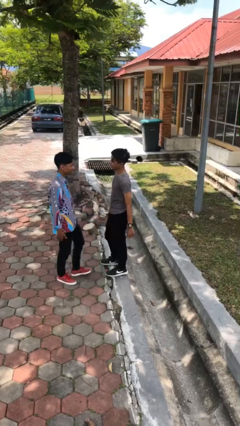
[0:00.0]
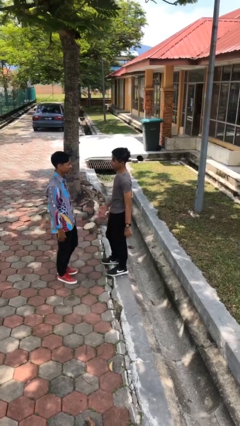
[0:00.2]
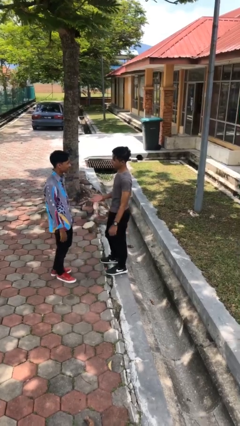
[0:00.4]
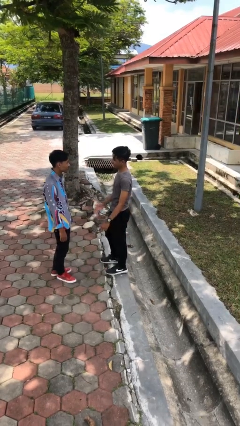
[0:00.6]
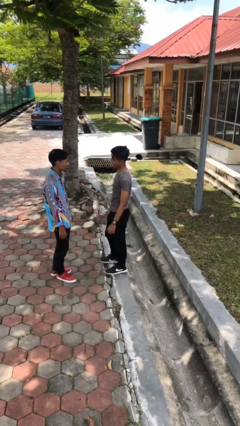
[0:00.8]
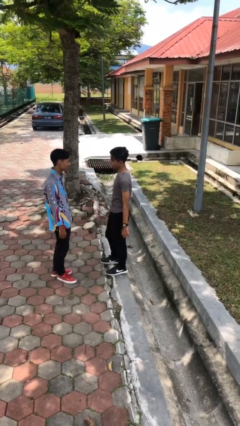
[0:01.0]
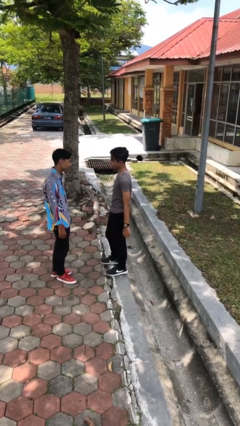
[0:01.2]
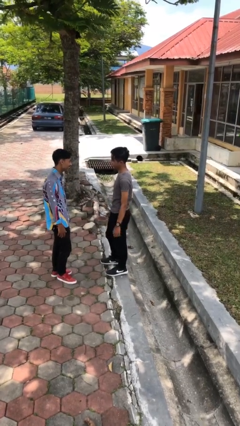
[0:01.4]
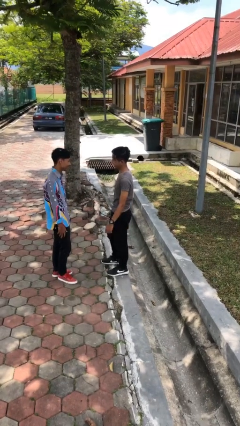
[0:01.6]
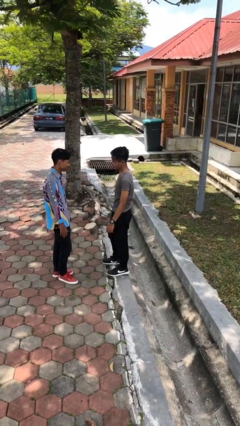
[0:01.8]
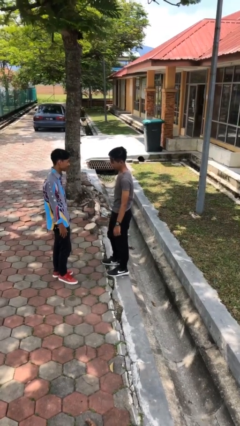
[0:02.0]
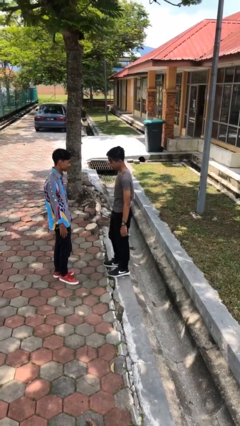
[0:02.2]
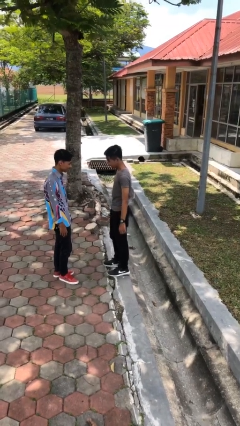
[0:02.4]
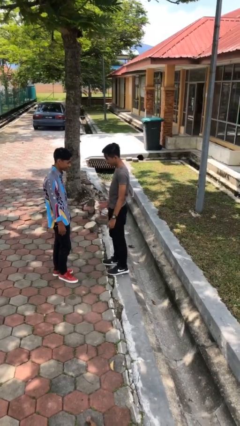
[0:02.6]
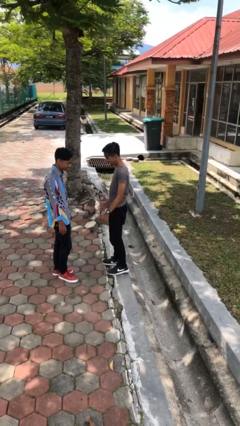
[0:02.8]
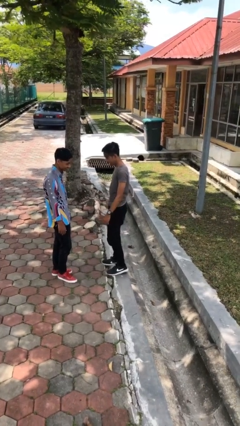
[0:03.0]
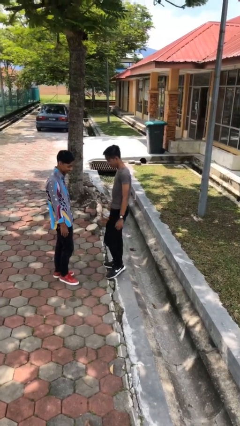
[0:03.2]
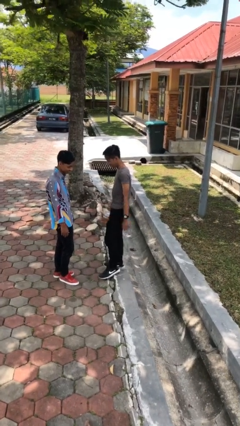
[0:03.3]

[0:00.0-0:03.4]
person talks to person

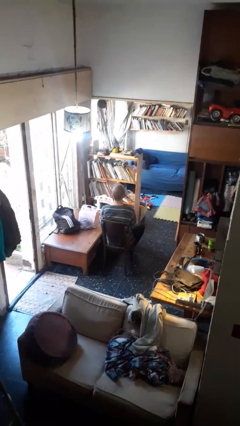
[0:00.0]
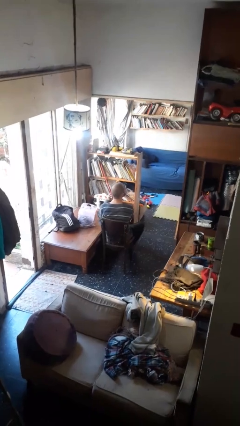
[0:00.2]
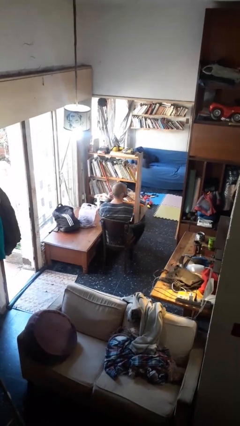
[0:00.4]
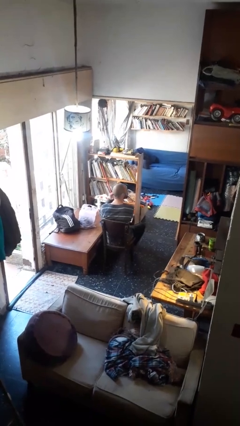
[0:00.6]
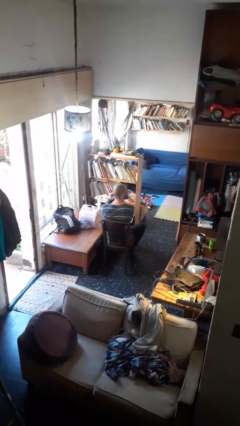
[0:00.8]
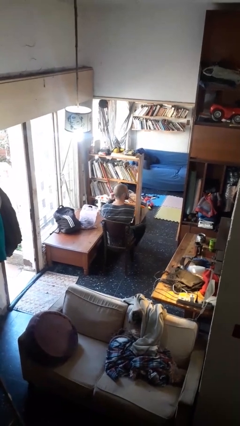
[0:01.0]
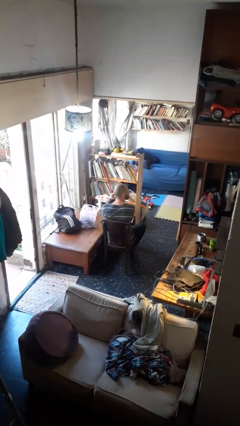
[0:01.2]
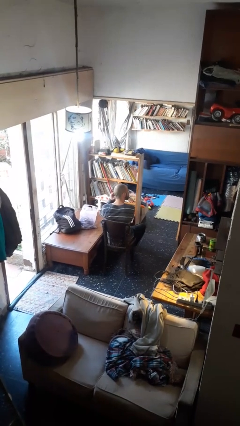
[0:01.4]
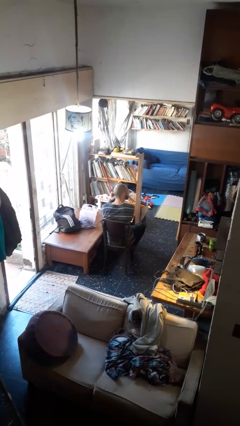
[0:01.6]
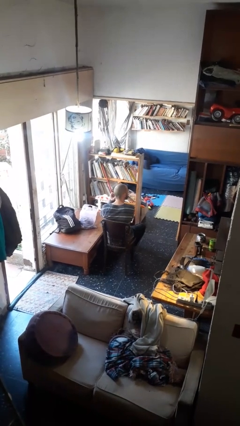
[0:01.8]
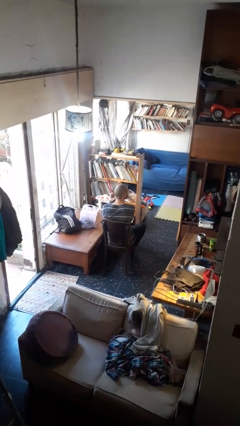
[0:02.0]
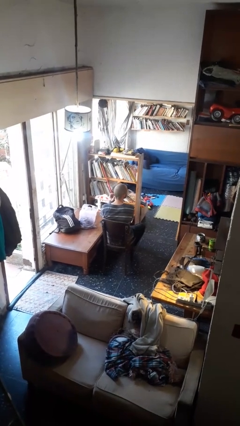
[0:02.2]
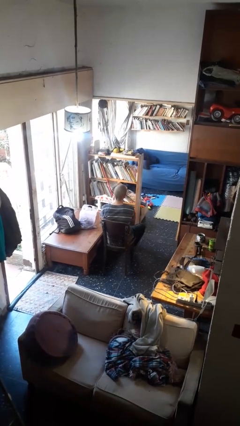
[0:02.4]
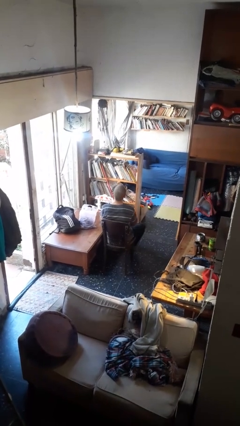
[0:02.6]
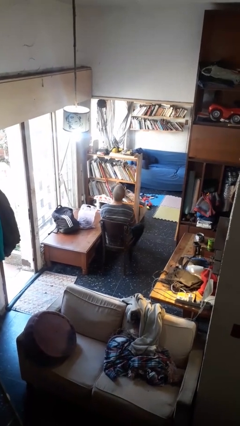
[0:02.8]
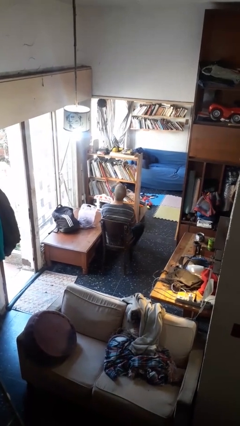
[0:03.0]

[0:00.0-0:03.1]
person puts on earrings

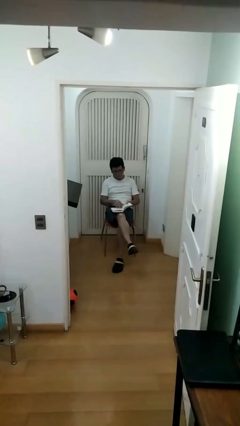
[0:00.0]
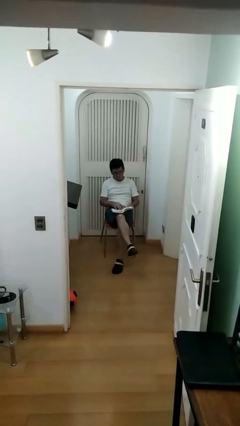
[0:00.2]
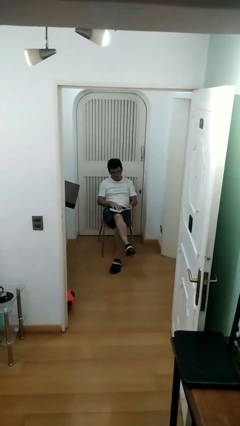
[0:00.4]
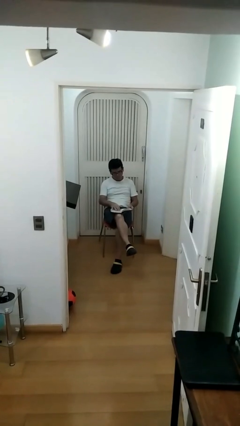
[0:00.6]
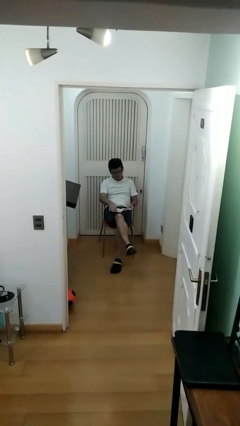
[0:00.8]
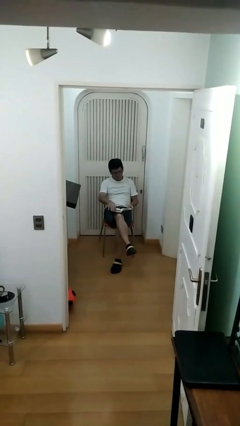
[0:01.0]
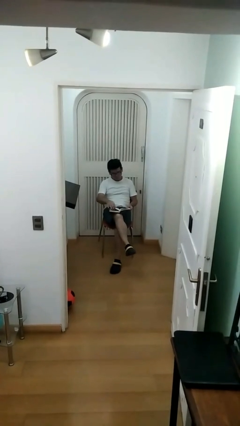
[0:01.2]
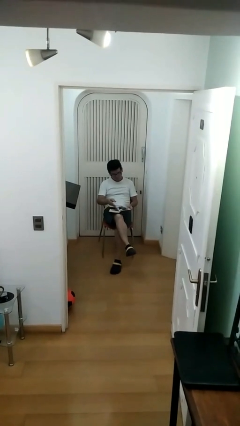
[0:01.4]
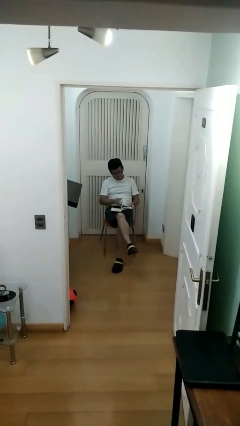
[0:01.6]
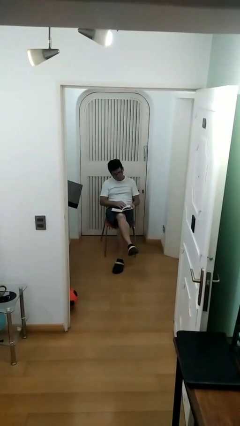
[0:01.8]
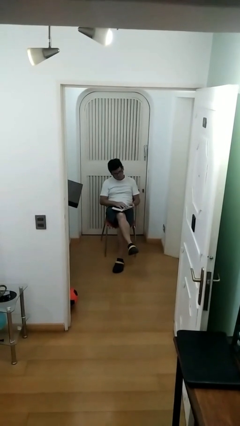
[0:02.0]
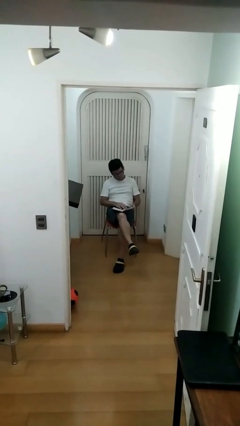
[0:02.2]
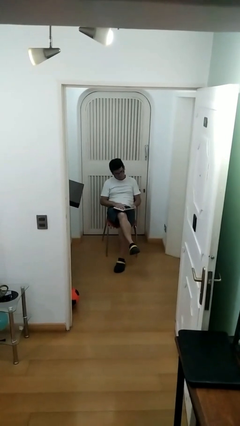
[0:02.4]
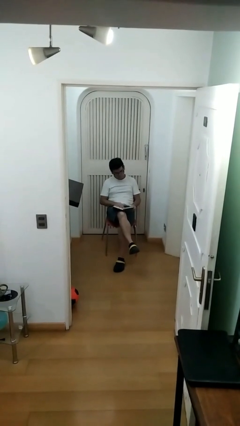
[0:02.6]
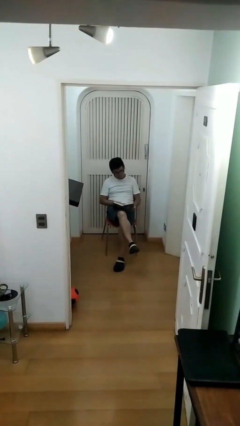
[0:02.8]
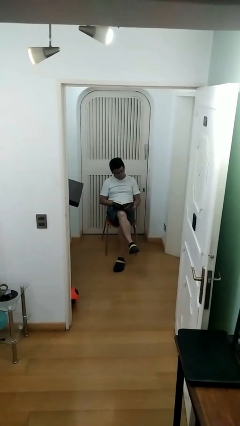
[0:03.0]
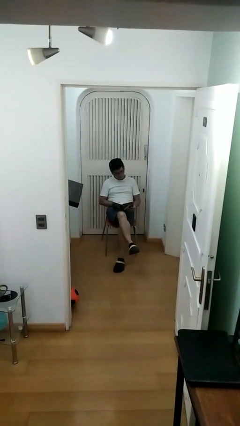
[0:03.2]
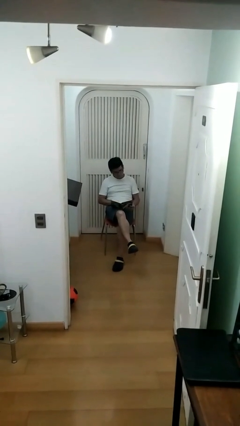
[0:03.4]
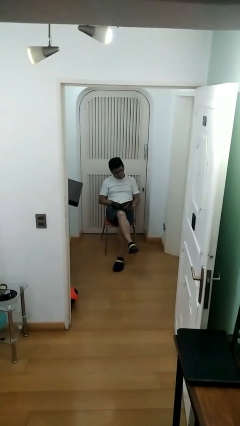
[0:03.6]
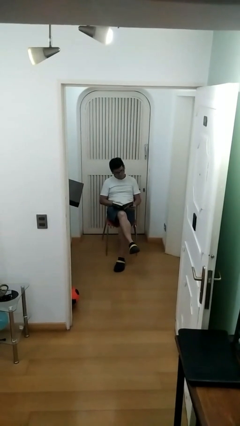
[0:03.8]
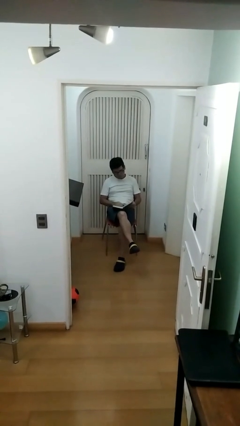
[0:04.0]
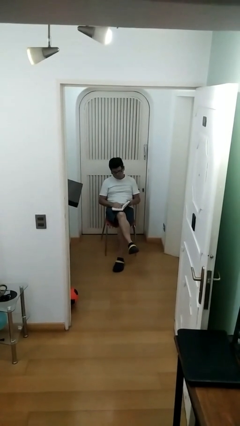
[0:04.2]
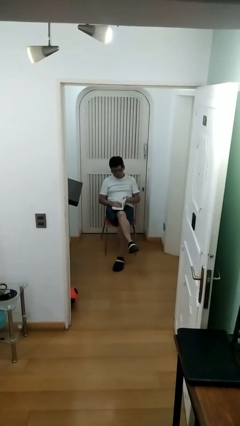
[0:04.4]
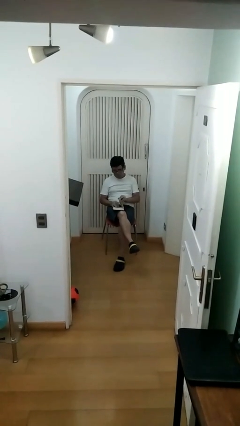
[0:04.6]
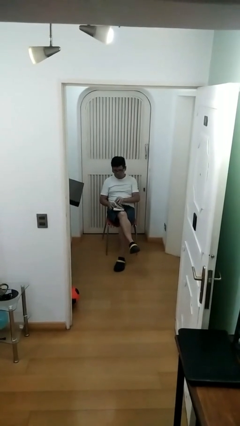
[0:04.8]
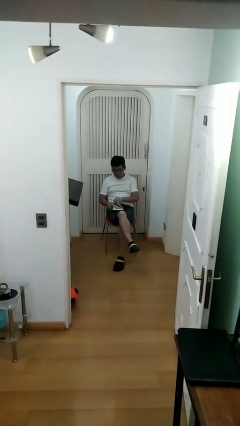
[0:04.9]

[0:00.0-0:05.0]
person reads document

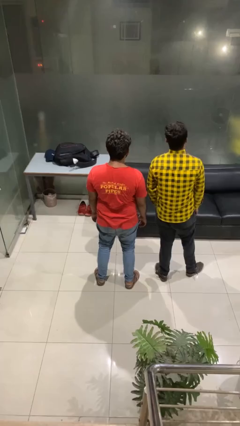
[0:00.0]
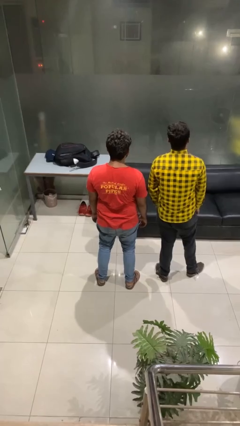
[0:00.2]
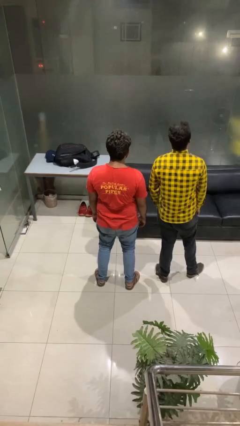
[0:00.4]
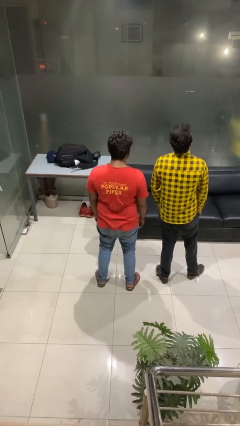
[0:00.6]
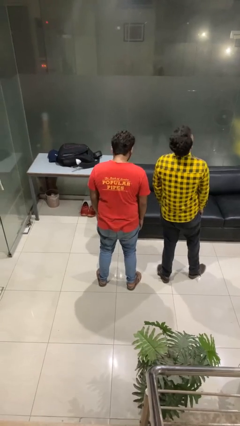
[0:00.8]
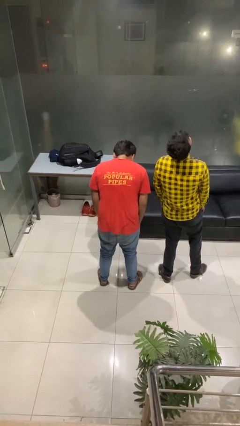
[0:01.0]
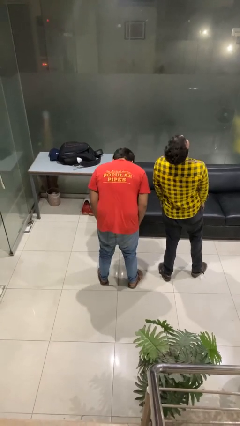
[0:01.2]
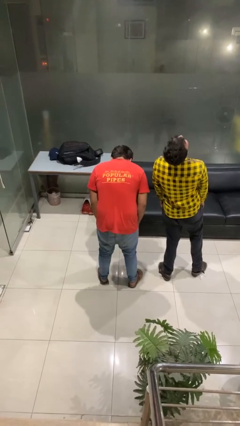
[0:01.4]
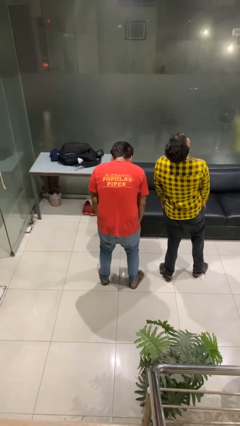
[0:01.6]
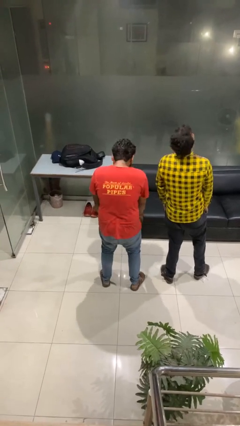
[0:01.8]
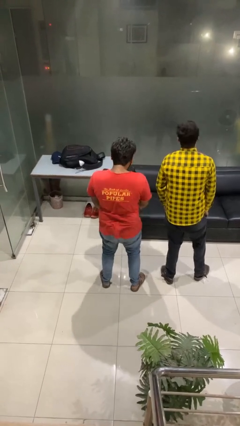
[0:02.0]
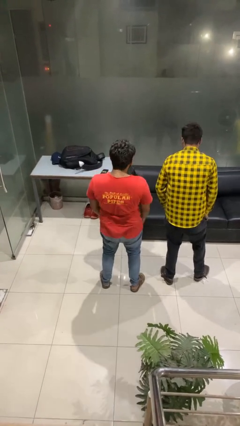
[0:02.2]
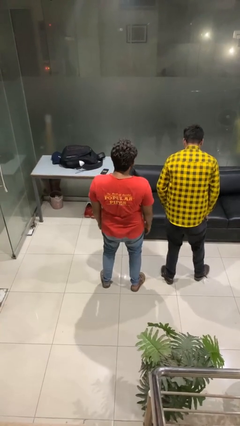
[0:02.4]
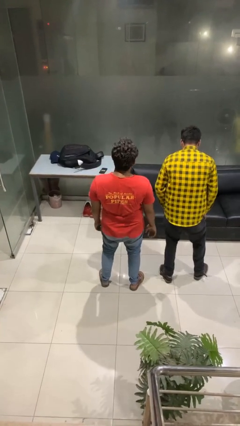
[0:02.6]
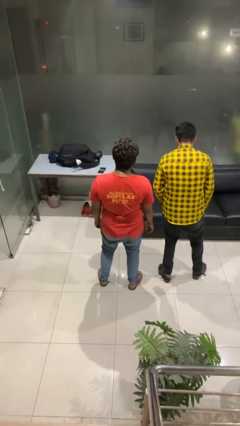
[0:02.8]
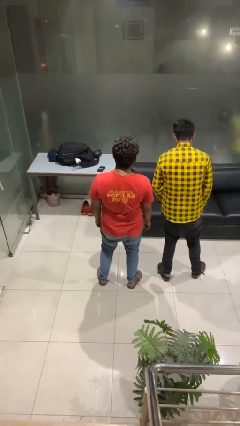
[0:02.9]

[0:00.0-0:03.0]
person laughs with person

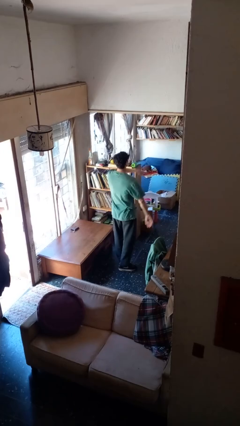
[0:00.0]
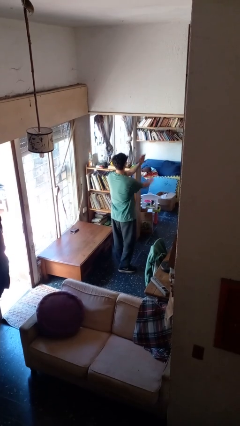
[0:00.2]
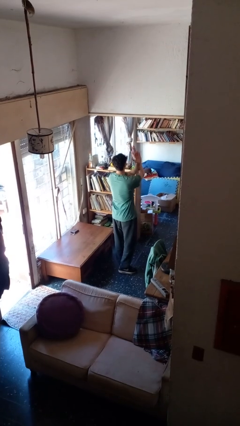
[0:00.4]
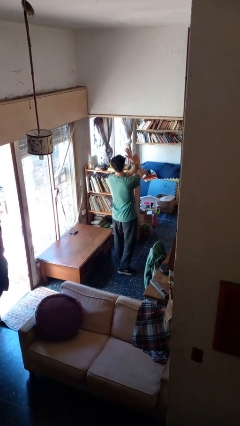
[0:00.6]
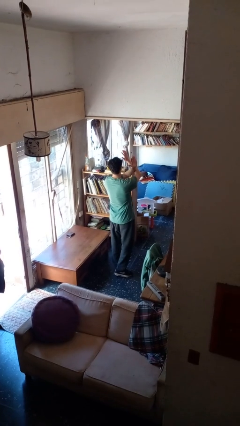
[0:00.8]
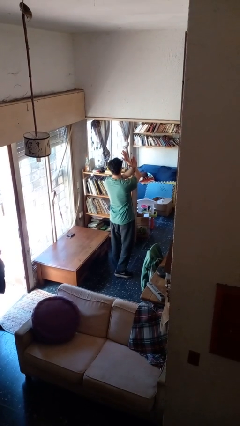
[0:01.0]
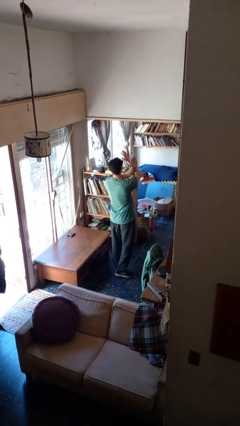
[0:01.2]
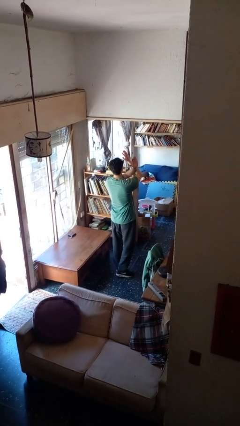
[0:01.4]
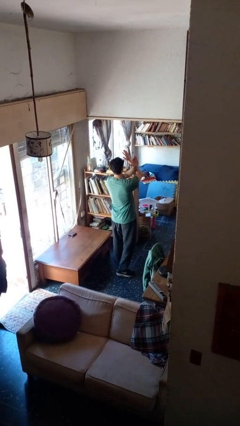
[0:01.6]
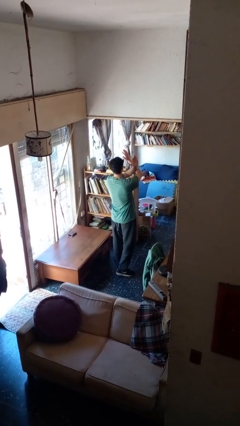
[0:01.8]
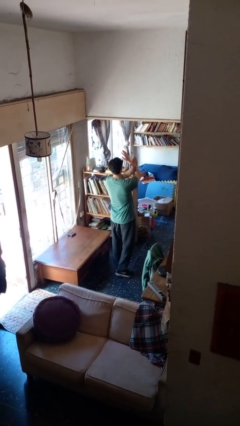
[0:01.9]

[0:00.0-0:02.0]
person gestures arms x

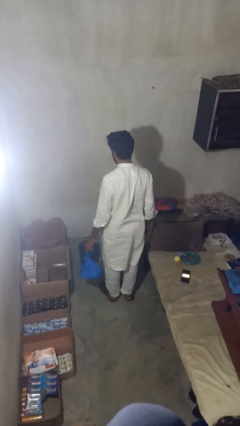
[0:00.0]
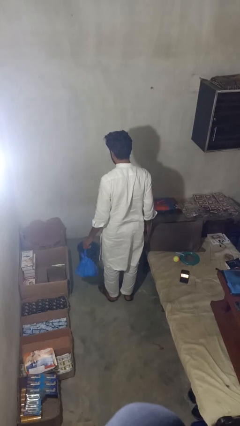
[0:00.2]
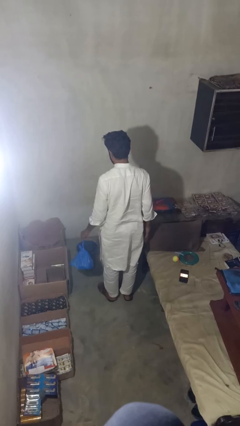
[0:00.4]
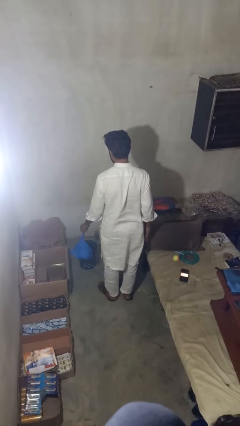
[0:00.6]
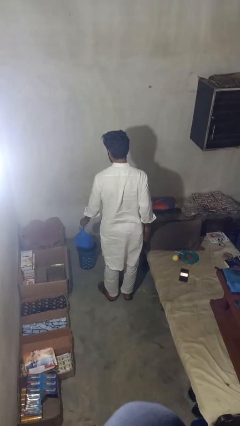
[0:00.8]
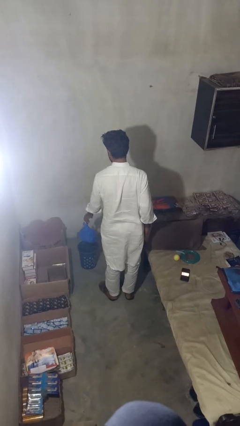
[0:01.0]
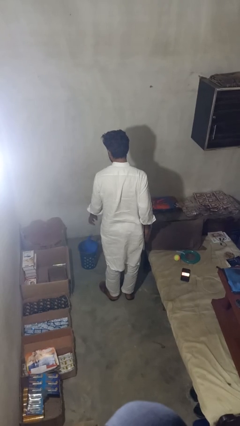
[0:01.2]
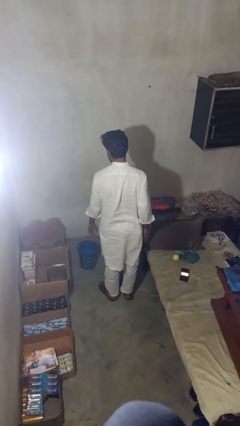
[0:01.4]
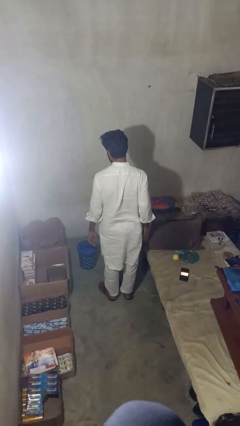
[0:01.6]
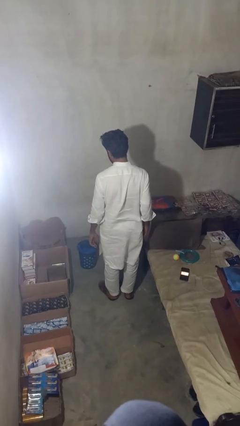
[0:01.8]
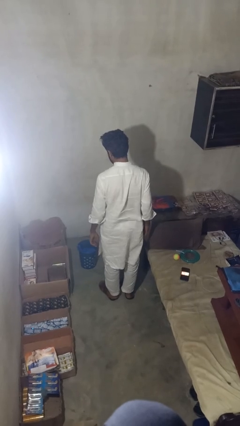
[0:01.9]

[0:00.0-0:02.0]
person puts object into basket
